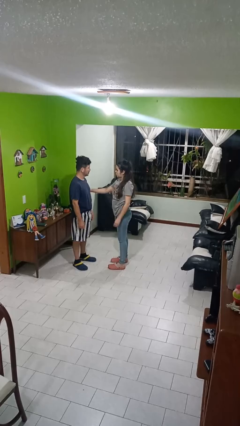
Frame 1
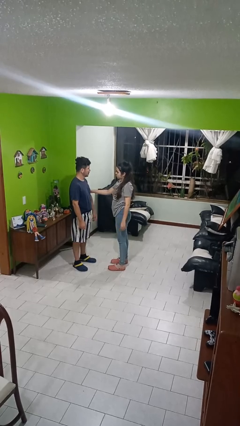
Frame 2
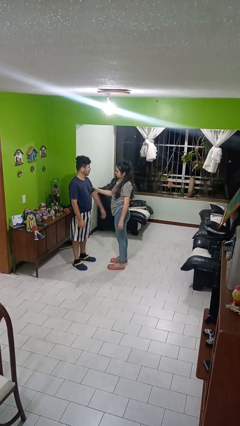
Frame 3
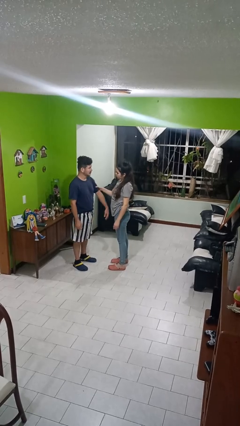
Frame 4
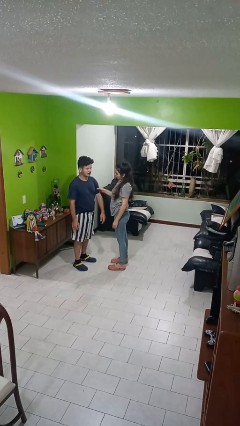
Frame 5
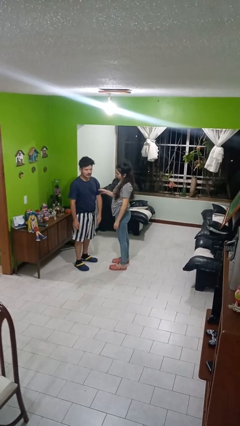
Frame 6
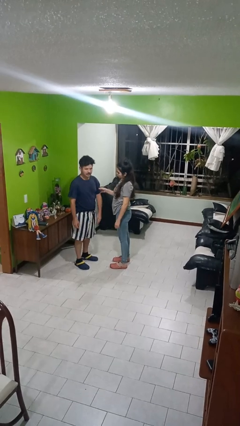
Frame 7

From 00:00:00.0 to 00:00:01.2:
person grabs person by bicep

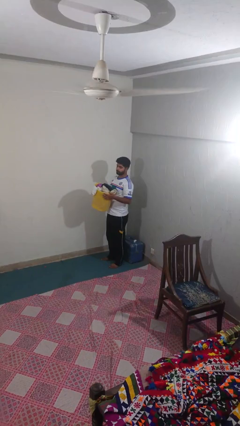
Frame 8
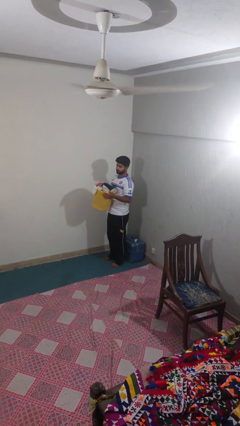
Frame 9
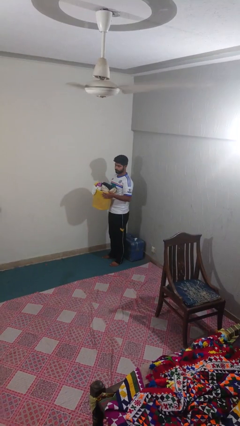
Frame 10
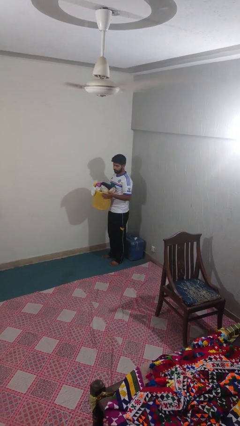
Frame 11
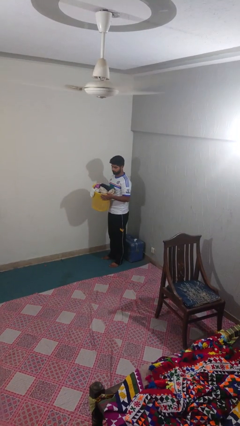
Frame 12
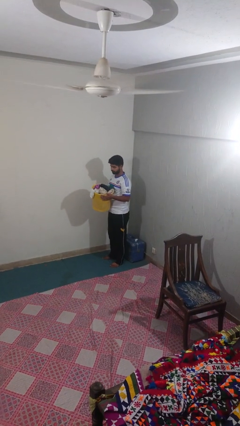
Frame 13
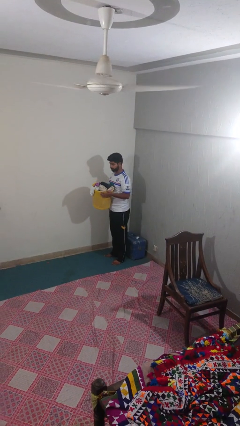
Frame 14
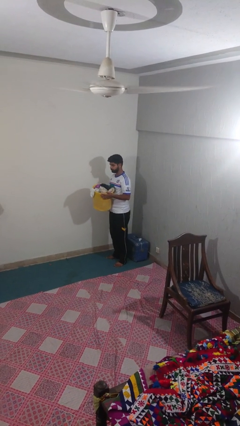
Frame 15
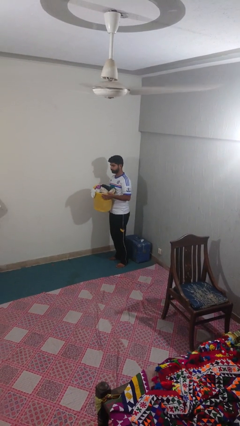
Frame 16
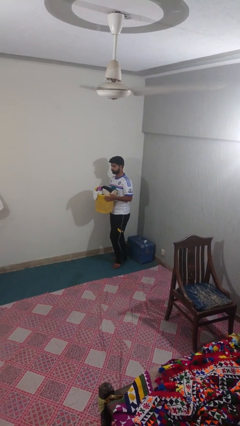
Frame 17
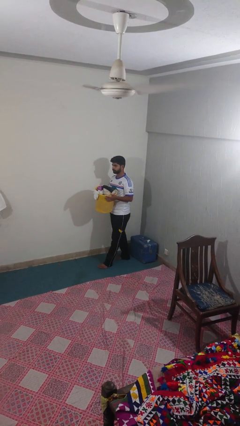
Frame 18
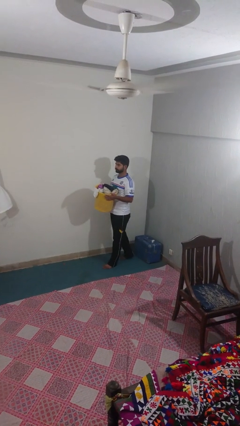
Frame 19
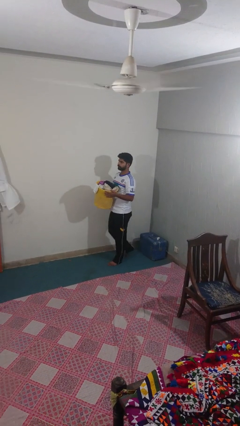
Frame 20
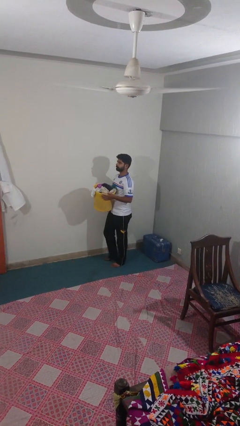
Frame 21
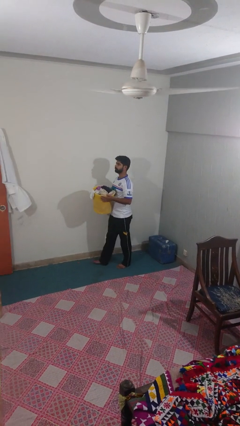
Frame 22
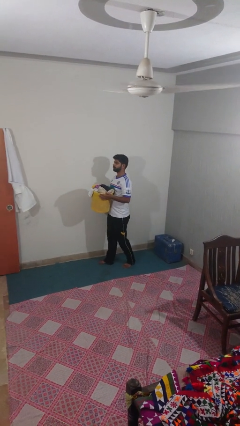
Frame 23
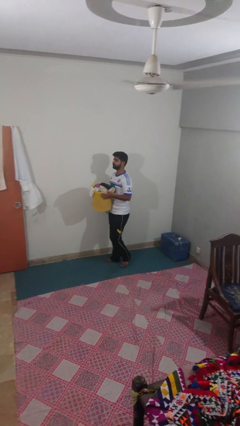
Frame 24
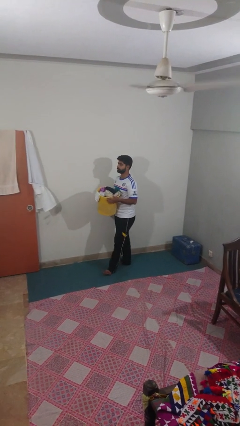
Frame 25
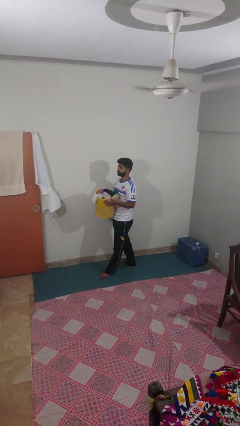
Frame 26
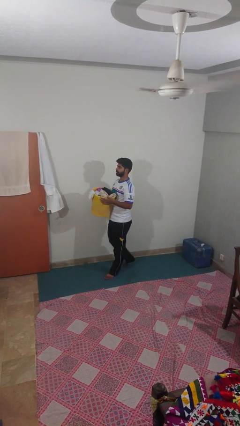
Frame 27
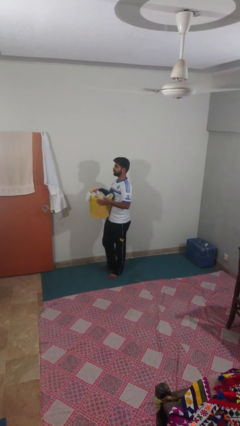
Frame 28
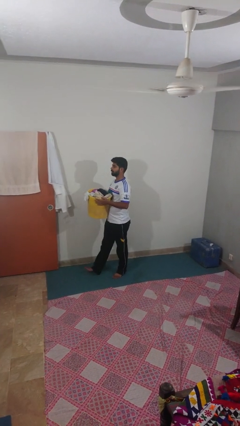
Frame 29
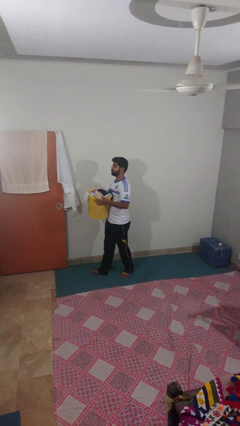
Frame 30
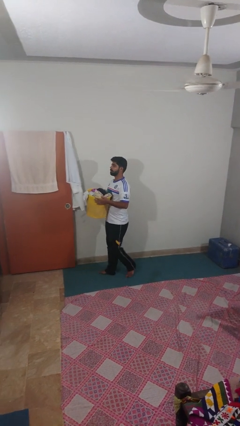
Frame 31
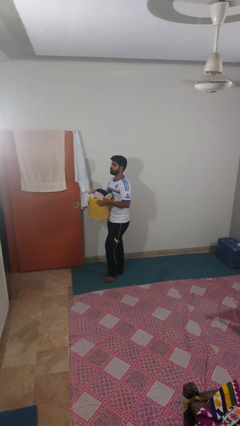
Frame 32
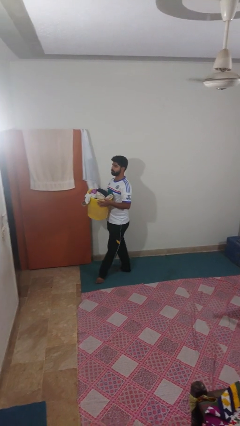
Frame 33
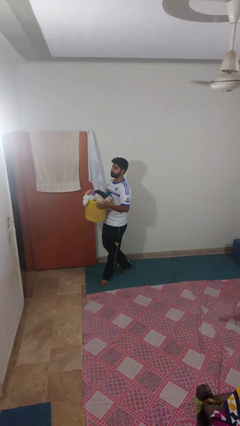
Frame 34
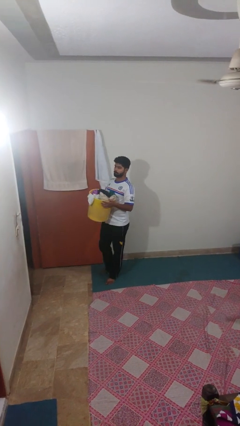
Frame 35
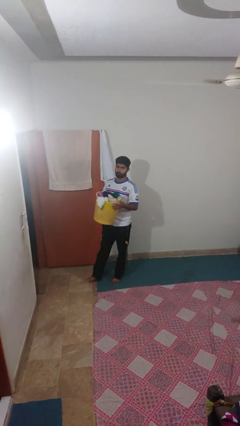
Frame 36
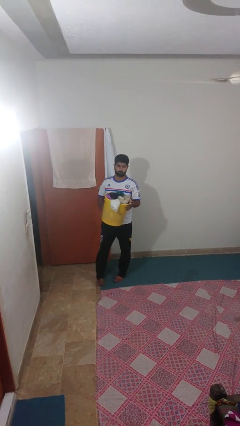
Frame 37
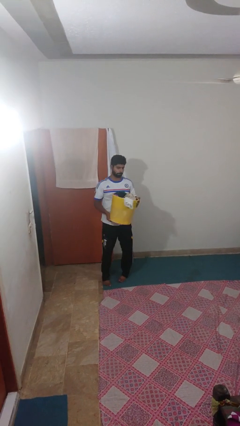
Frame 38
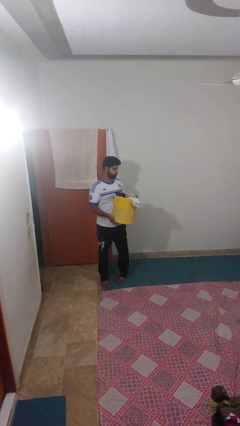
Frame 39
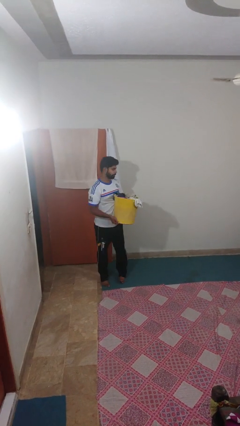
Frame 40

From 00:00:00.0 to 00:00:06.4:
person carries laundry basket

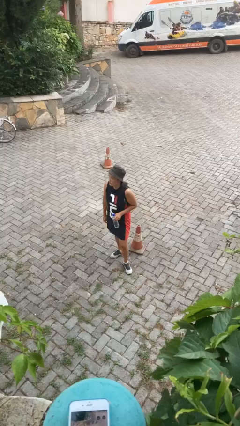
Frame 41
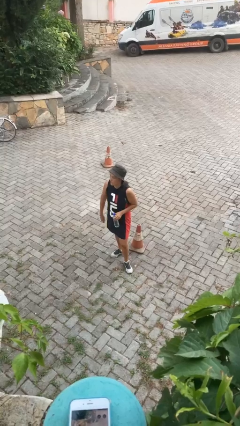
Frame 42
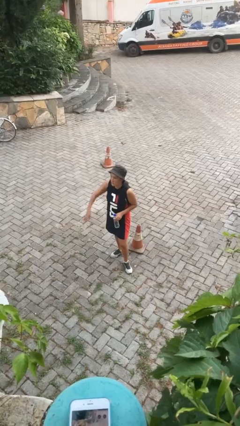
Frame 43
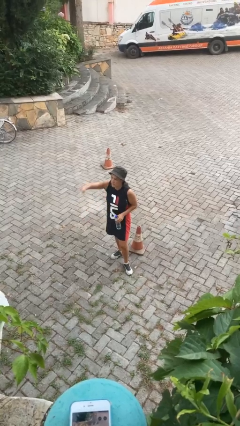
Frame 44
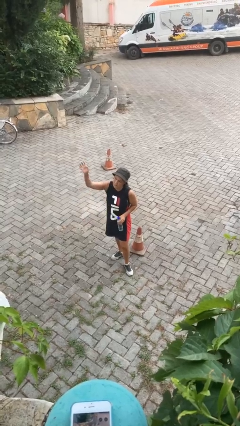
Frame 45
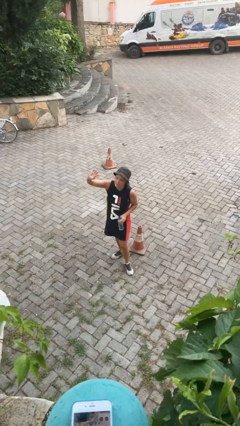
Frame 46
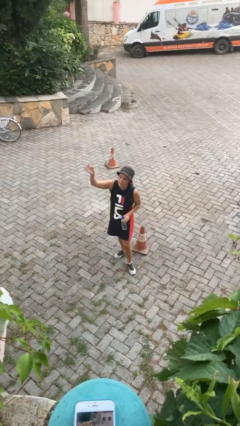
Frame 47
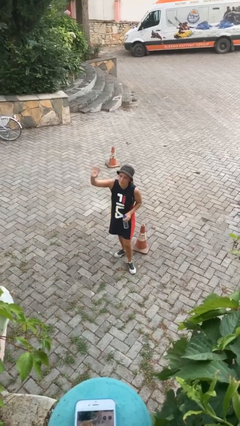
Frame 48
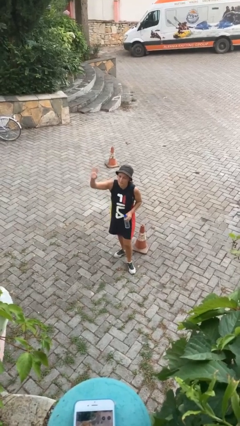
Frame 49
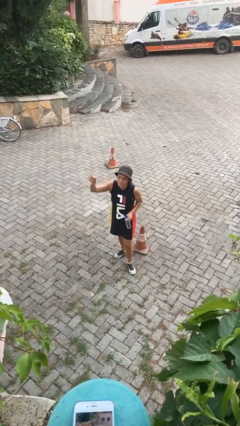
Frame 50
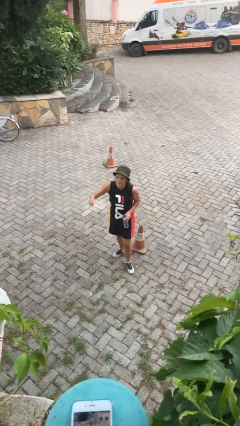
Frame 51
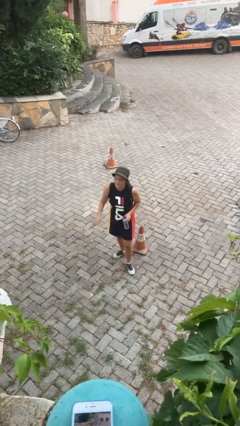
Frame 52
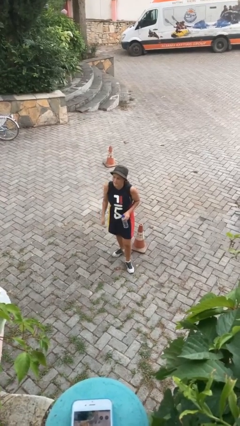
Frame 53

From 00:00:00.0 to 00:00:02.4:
person gestures raise hand

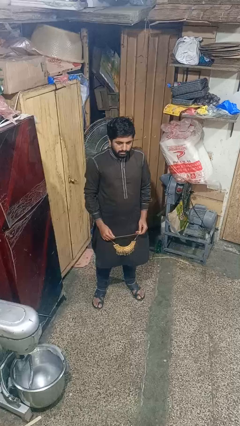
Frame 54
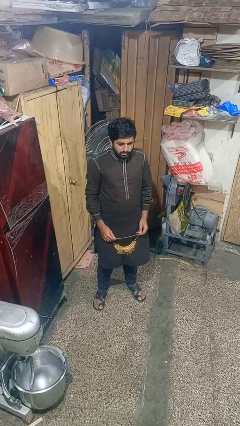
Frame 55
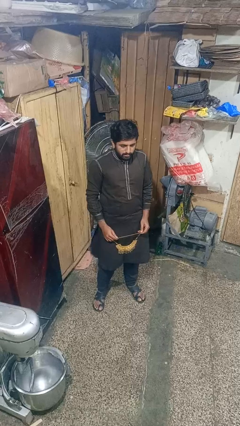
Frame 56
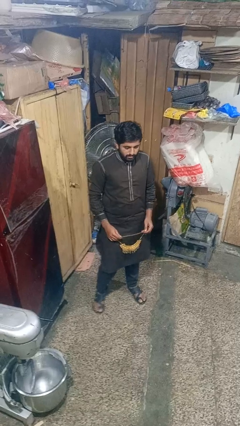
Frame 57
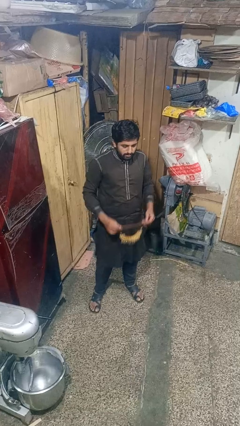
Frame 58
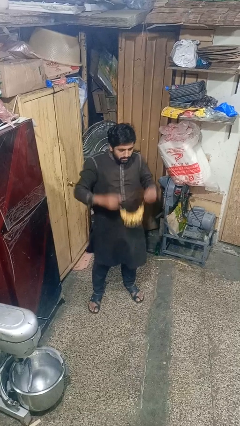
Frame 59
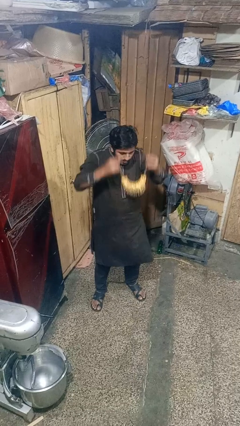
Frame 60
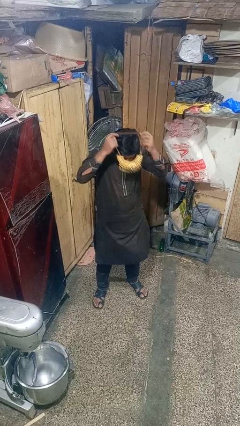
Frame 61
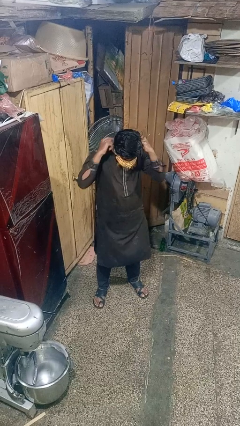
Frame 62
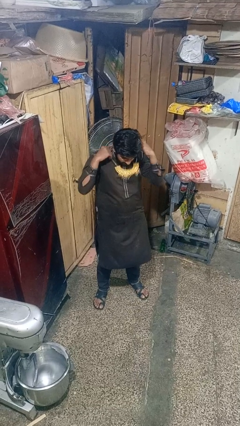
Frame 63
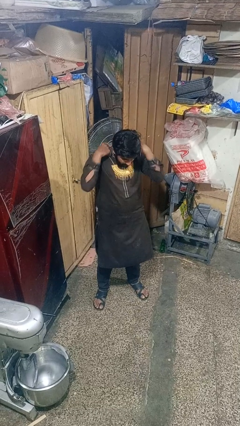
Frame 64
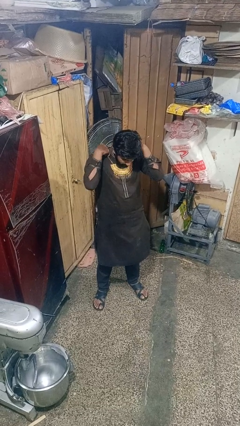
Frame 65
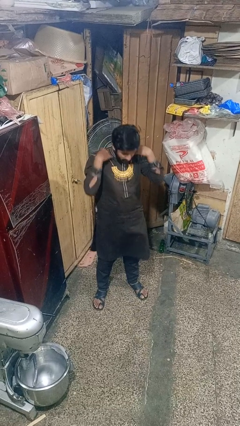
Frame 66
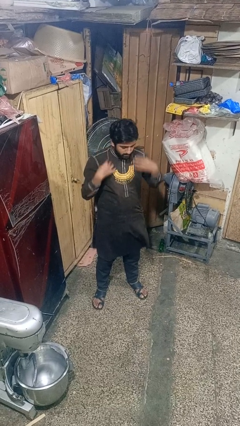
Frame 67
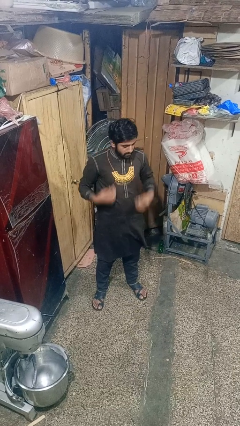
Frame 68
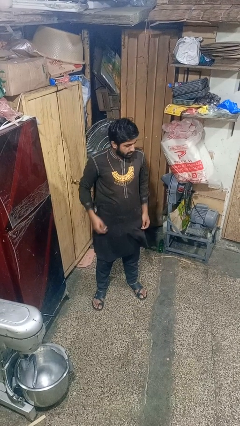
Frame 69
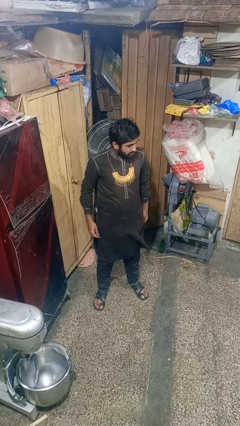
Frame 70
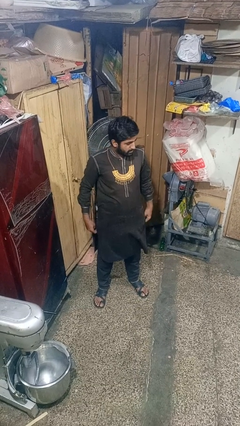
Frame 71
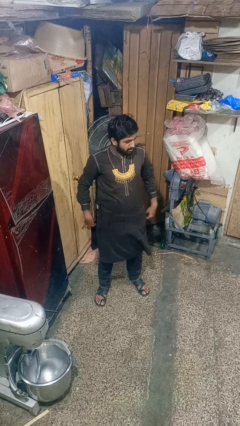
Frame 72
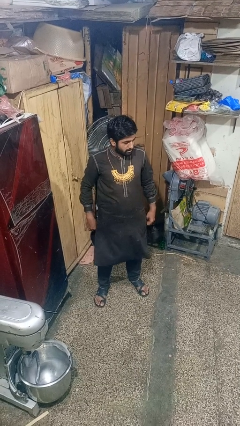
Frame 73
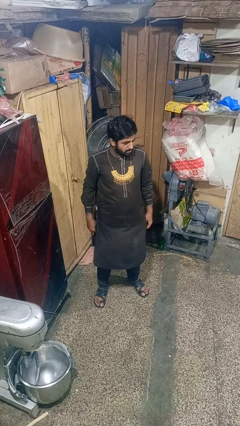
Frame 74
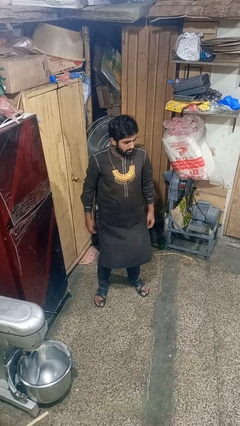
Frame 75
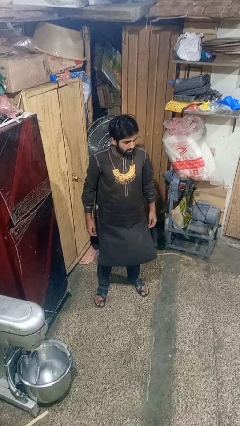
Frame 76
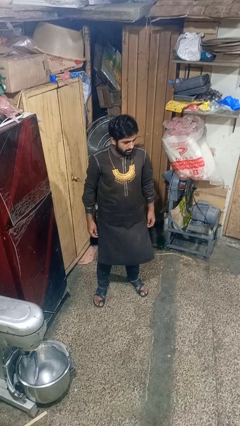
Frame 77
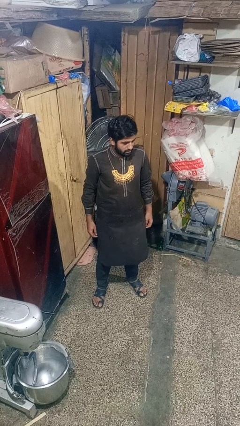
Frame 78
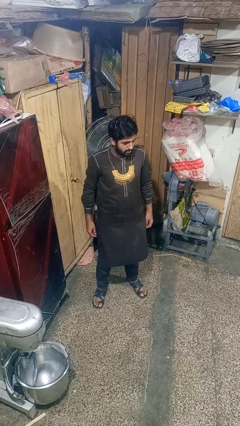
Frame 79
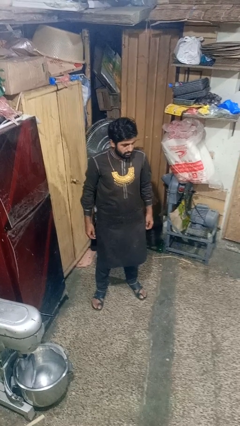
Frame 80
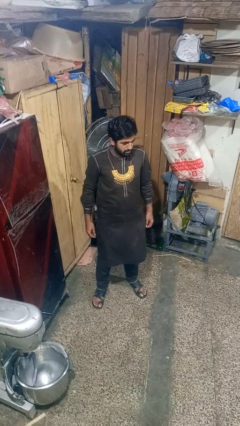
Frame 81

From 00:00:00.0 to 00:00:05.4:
person puts on necklace

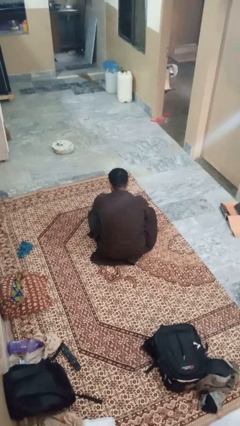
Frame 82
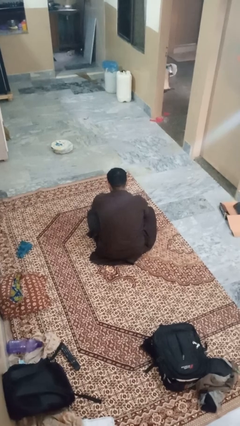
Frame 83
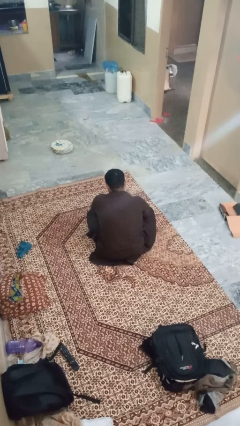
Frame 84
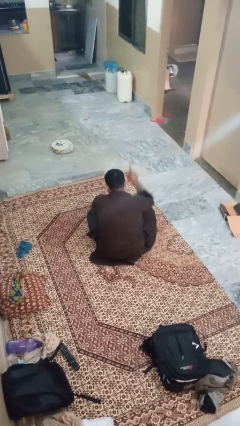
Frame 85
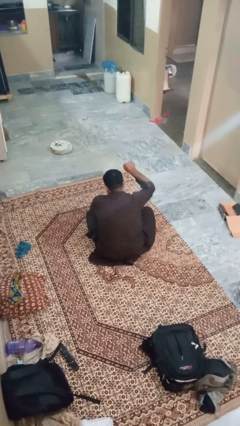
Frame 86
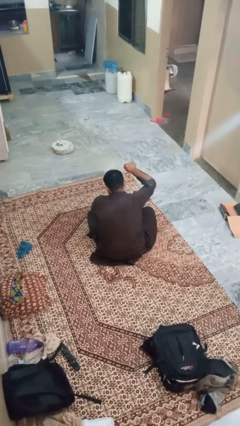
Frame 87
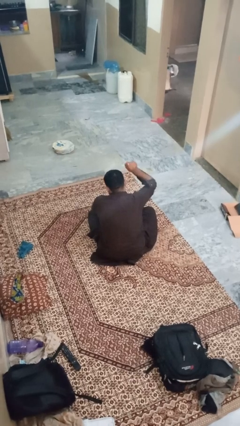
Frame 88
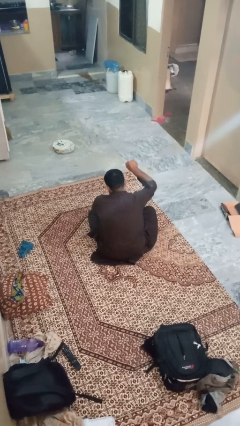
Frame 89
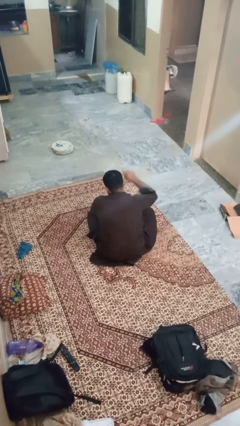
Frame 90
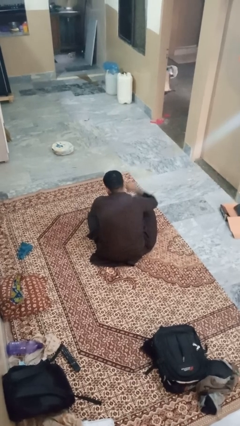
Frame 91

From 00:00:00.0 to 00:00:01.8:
person gestures number one

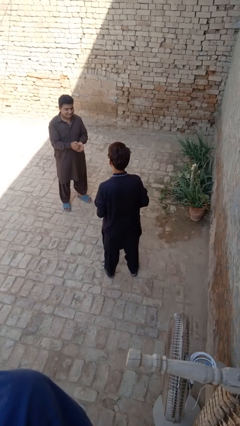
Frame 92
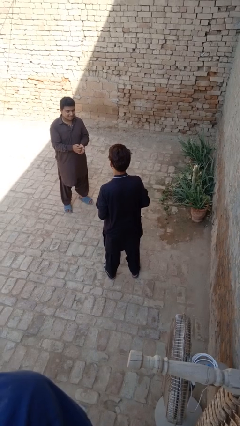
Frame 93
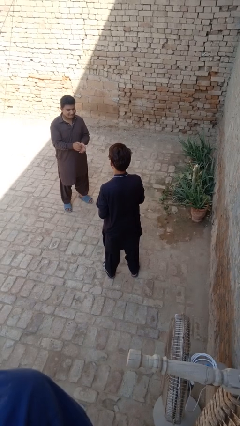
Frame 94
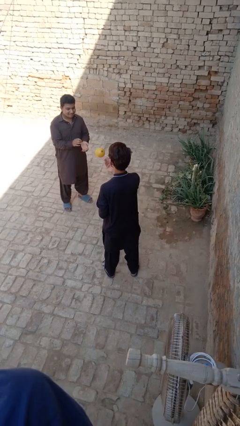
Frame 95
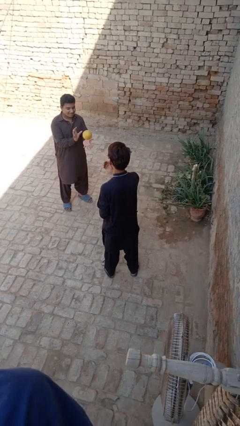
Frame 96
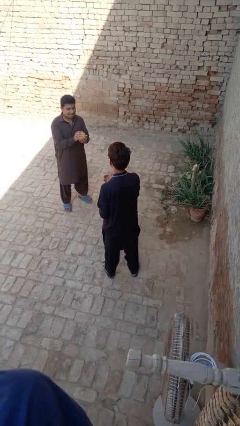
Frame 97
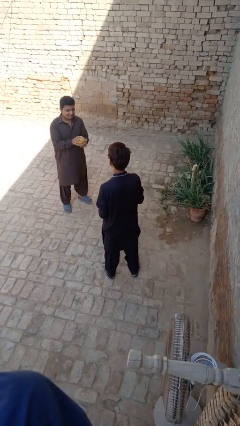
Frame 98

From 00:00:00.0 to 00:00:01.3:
person throws object to person
